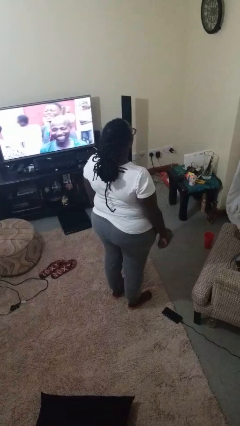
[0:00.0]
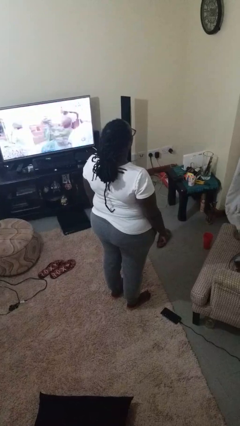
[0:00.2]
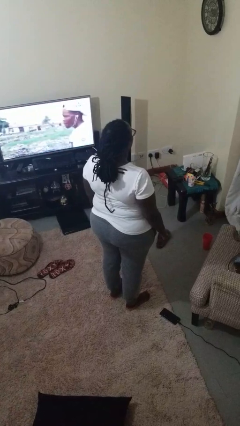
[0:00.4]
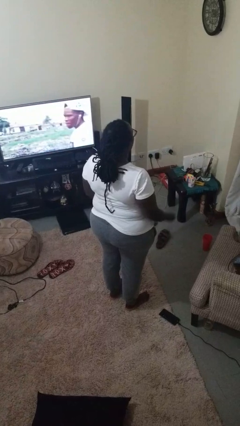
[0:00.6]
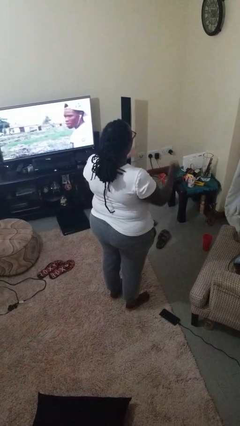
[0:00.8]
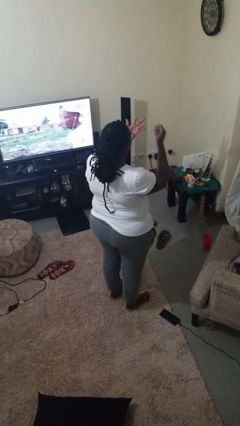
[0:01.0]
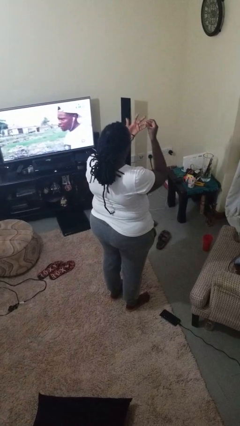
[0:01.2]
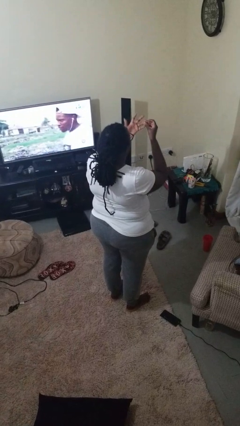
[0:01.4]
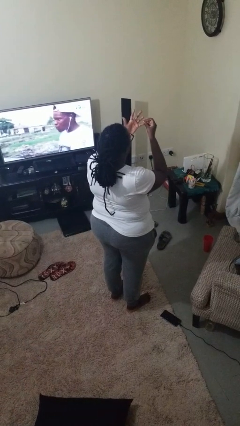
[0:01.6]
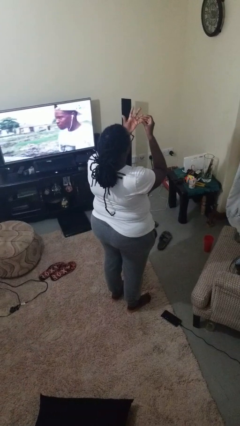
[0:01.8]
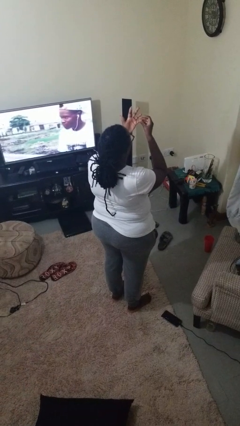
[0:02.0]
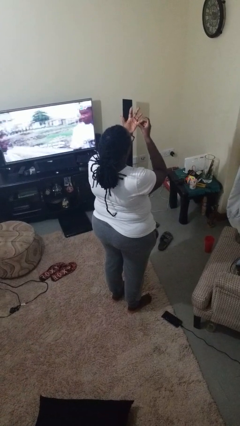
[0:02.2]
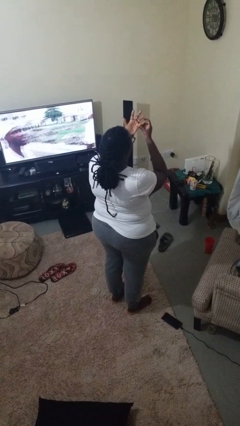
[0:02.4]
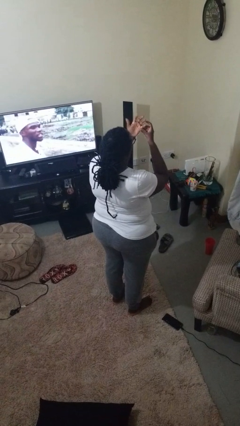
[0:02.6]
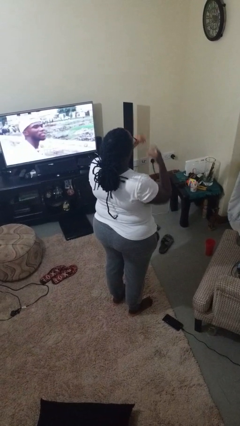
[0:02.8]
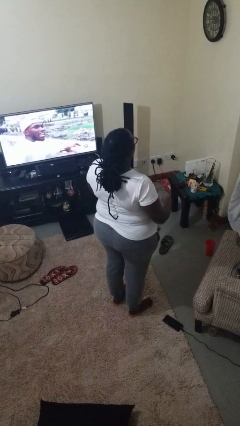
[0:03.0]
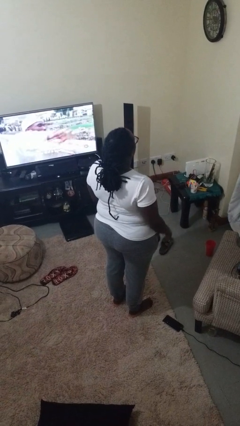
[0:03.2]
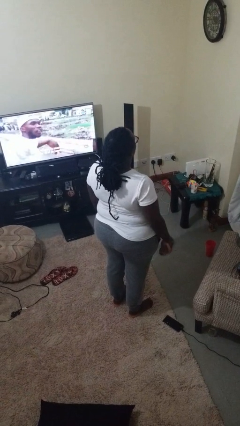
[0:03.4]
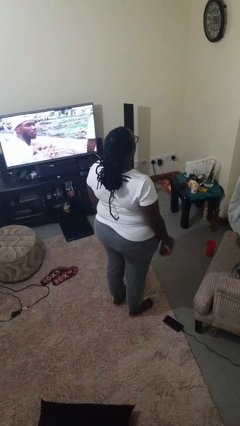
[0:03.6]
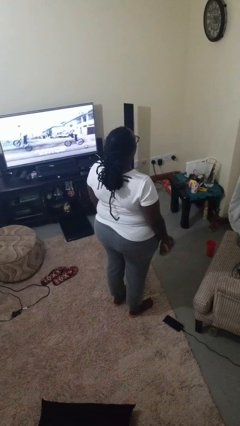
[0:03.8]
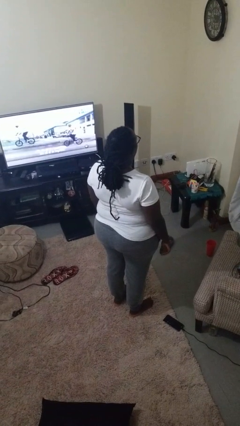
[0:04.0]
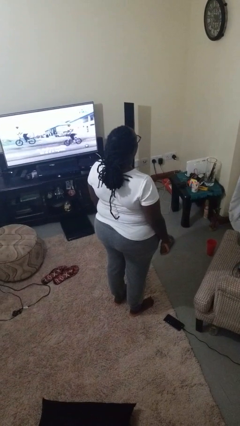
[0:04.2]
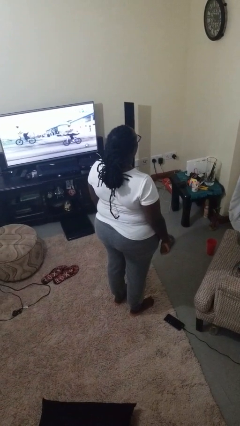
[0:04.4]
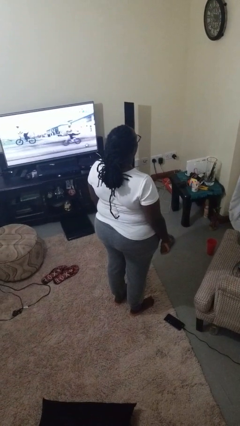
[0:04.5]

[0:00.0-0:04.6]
person puts on ring

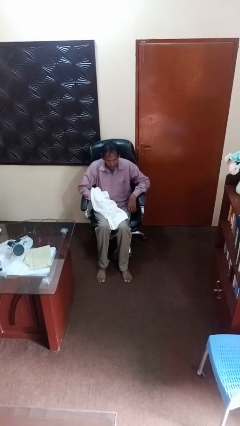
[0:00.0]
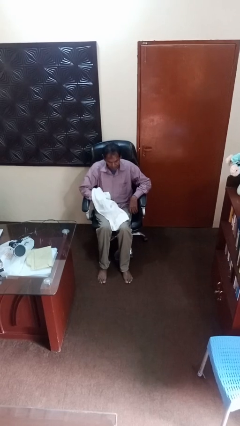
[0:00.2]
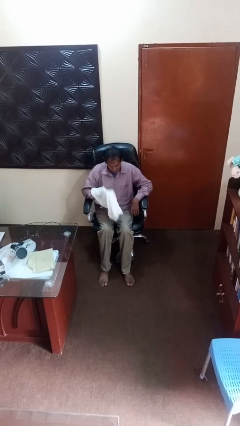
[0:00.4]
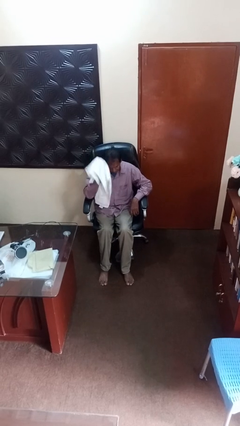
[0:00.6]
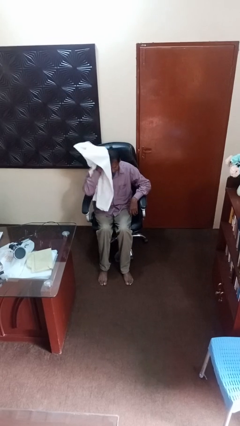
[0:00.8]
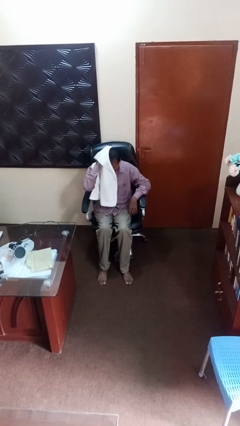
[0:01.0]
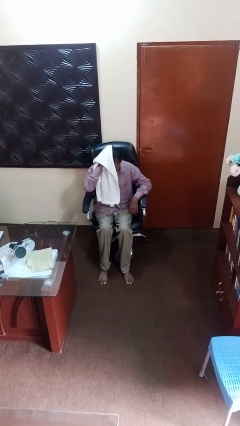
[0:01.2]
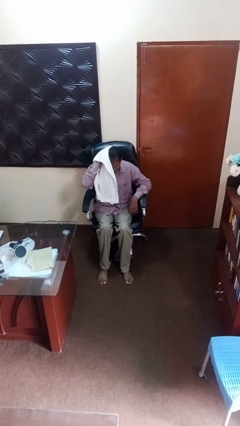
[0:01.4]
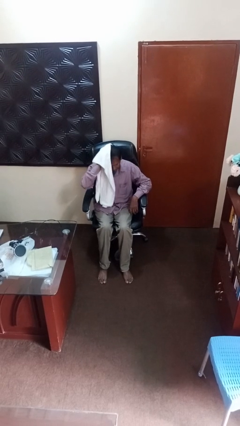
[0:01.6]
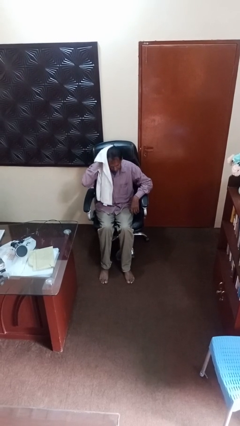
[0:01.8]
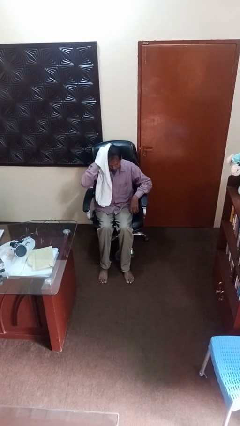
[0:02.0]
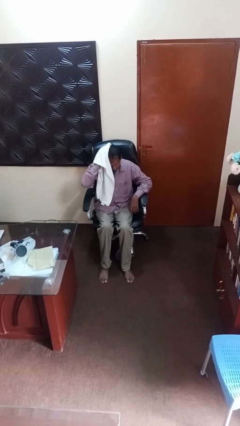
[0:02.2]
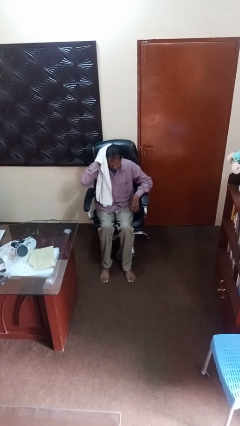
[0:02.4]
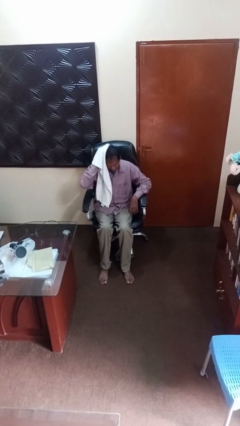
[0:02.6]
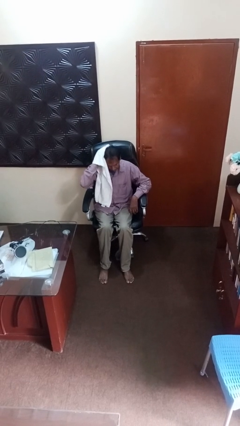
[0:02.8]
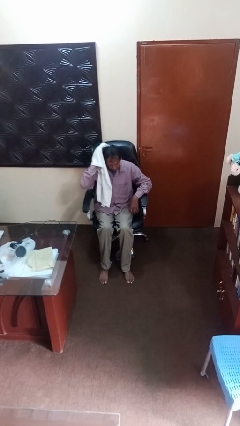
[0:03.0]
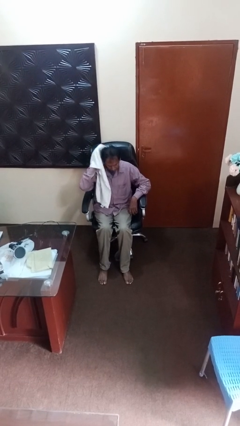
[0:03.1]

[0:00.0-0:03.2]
person dries hair with towel

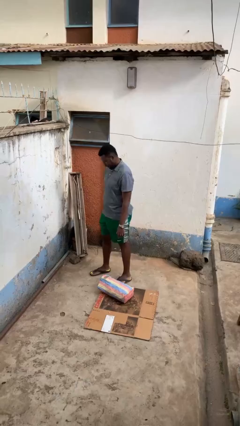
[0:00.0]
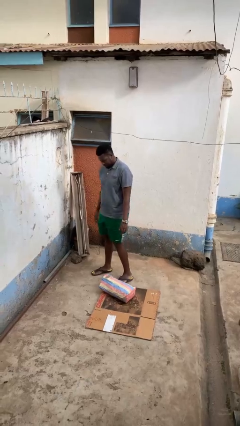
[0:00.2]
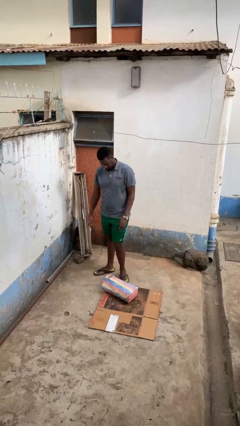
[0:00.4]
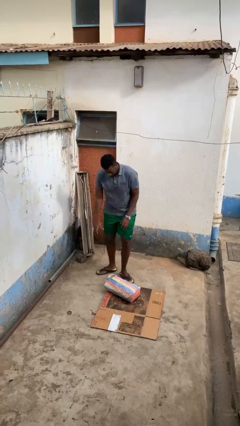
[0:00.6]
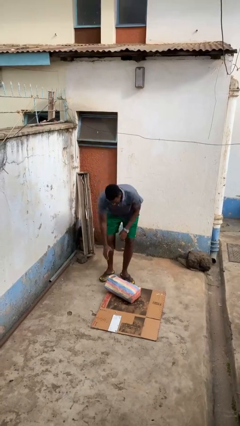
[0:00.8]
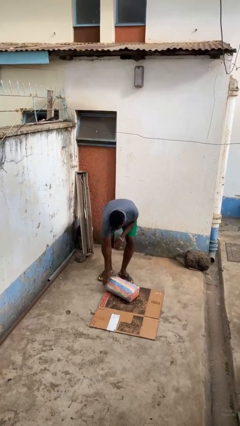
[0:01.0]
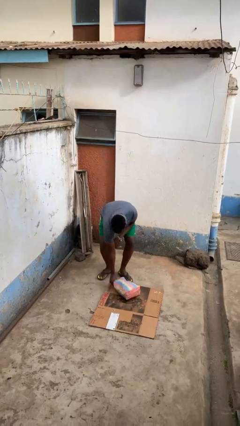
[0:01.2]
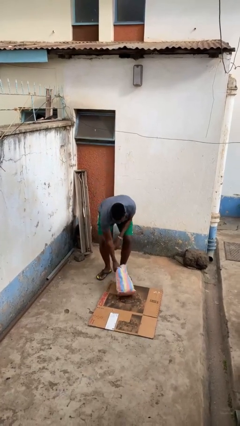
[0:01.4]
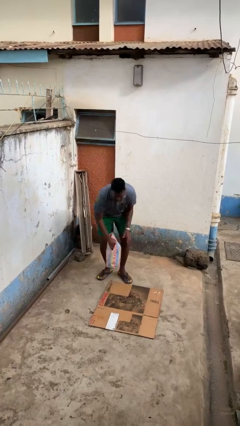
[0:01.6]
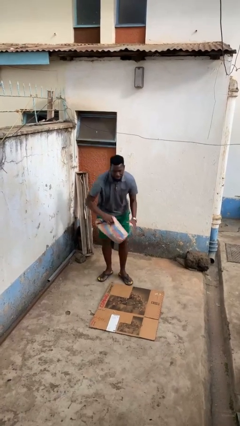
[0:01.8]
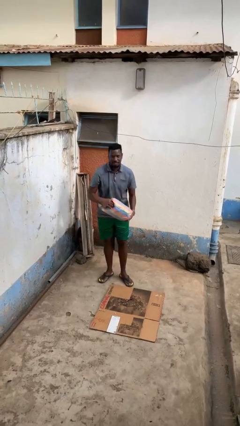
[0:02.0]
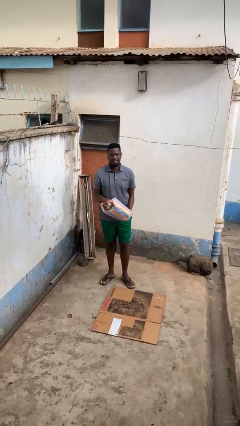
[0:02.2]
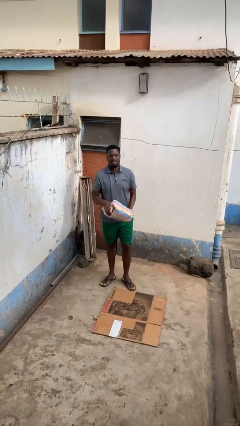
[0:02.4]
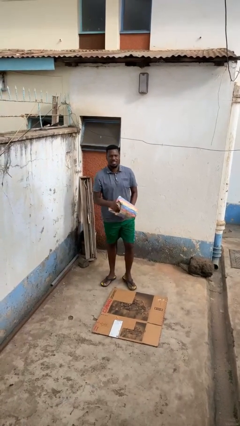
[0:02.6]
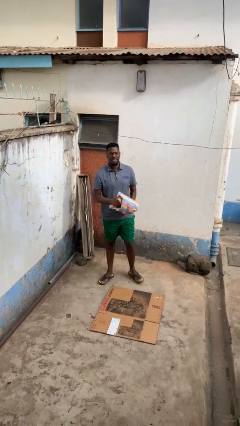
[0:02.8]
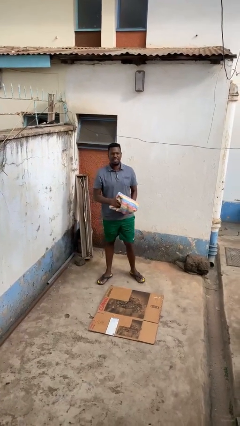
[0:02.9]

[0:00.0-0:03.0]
person picks up object from floor

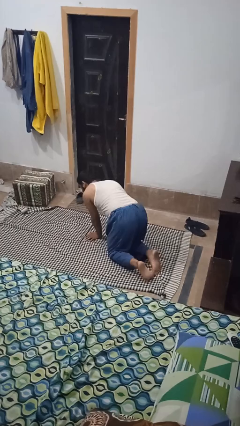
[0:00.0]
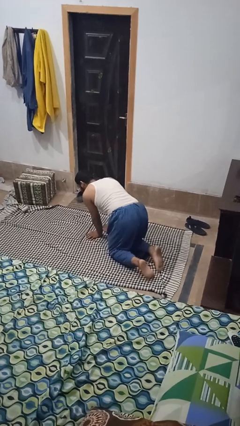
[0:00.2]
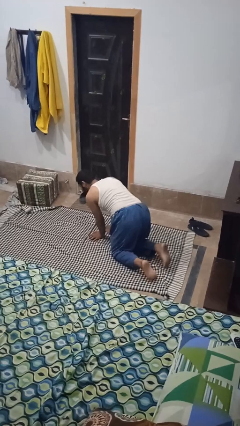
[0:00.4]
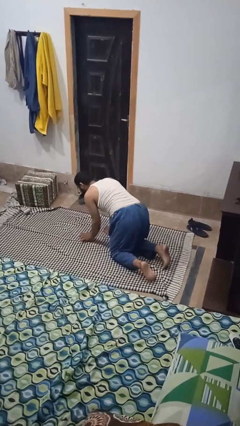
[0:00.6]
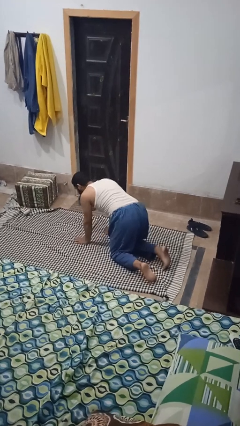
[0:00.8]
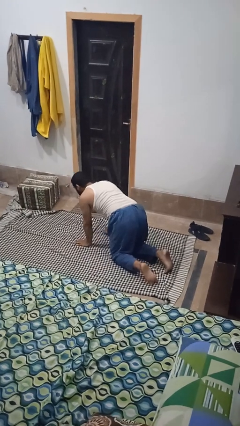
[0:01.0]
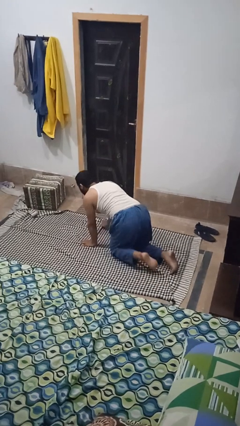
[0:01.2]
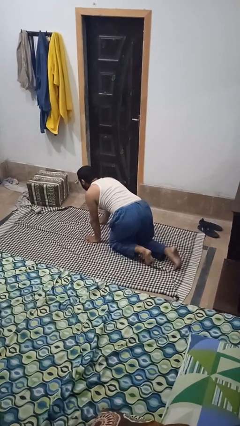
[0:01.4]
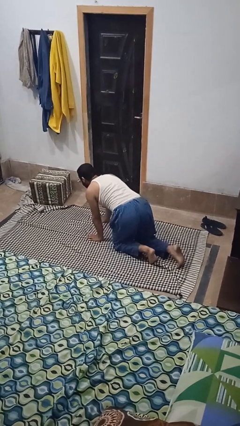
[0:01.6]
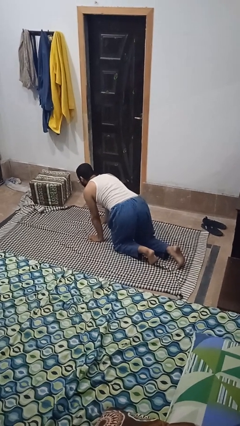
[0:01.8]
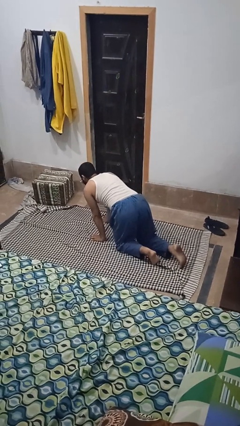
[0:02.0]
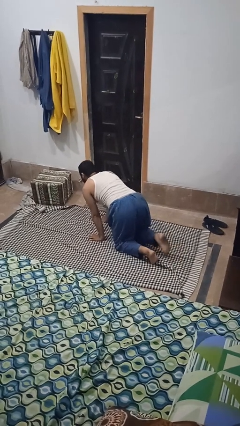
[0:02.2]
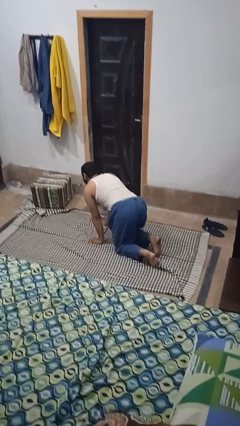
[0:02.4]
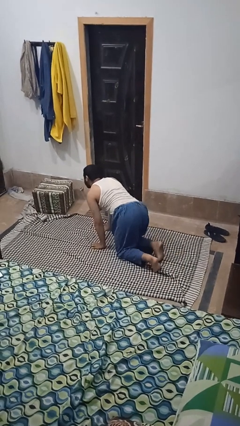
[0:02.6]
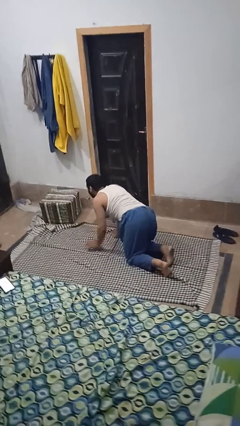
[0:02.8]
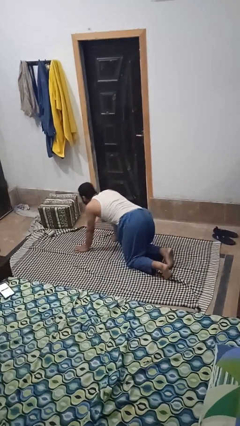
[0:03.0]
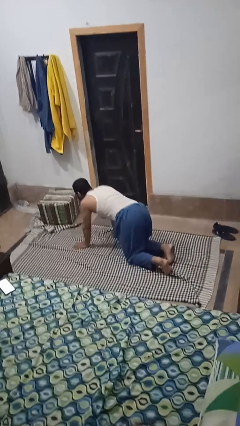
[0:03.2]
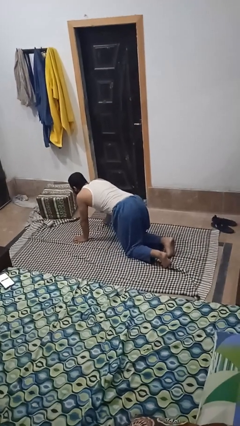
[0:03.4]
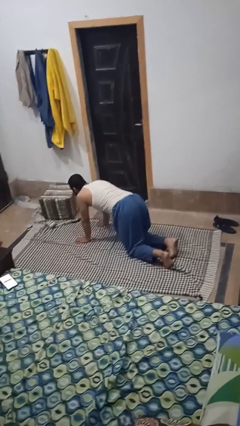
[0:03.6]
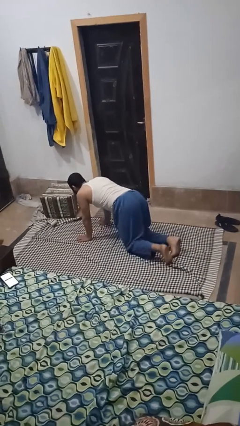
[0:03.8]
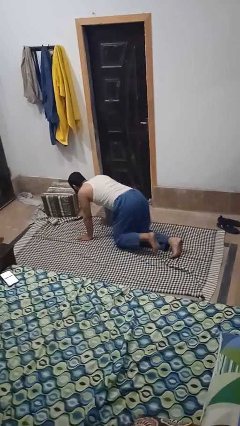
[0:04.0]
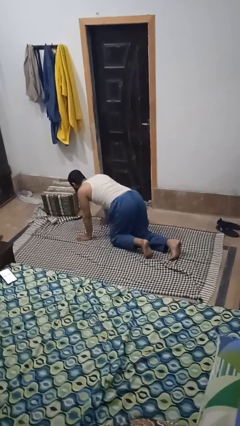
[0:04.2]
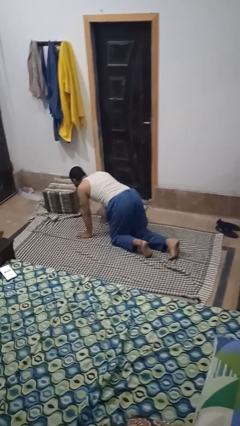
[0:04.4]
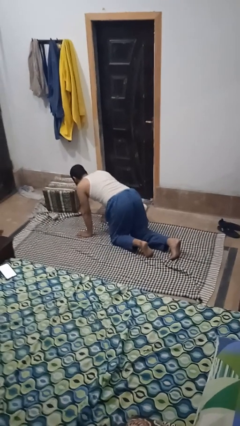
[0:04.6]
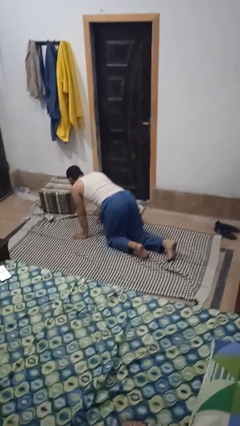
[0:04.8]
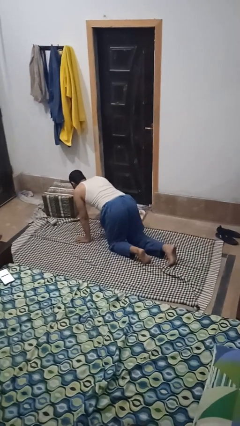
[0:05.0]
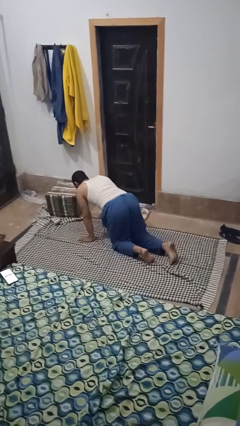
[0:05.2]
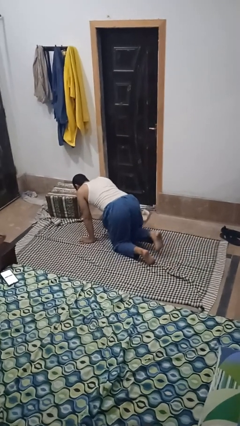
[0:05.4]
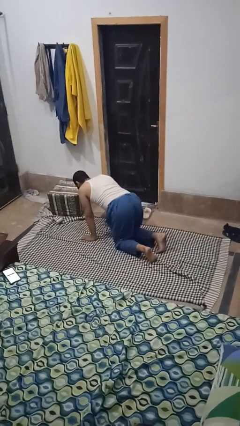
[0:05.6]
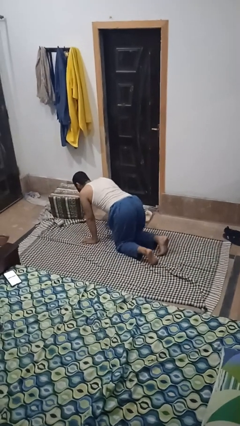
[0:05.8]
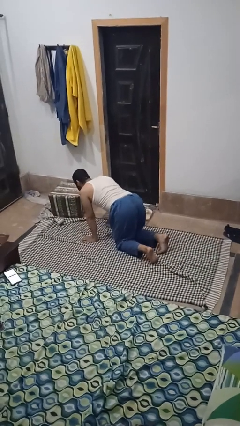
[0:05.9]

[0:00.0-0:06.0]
person crawls

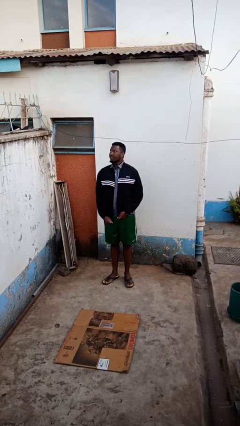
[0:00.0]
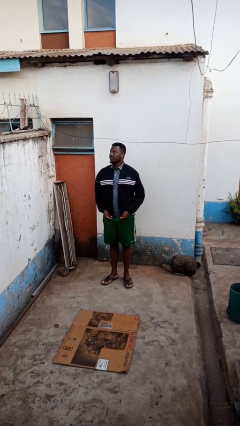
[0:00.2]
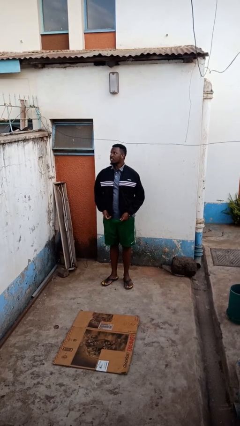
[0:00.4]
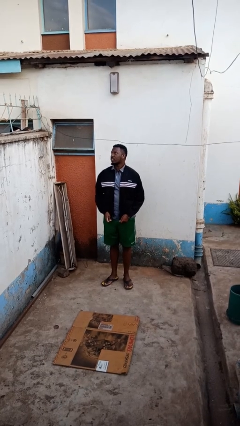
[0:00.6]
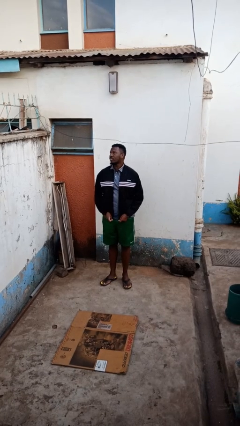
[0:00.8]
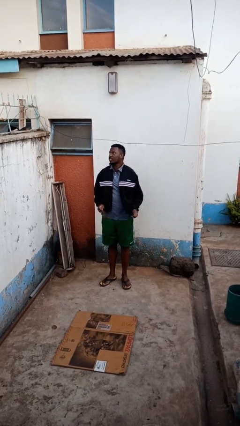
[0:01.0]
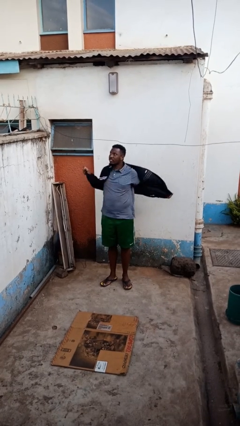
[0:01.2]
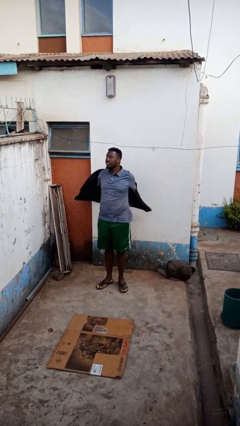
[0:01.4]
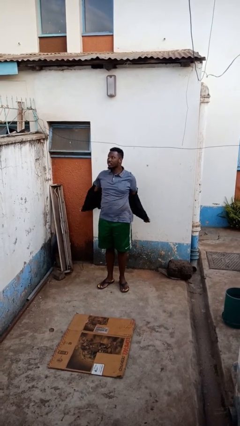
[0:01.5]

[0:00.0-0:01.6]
person unzips jacket
